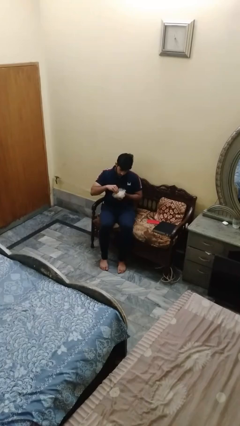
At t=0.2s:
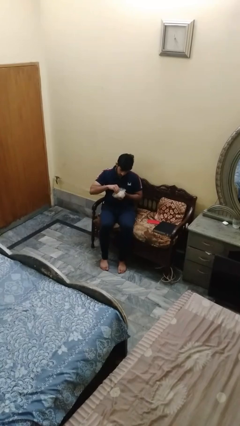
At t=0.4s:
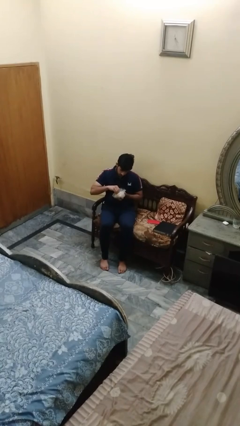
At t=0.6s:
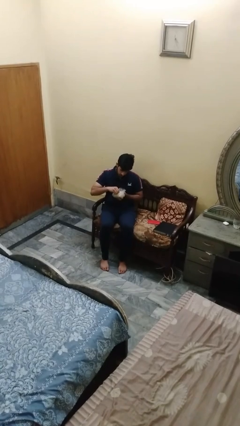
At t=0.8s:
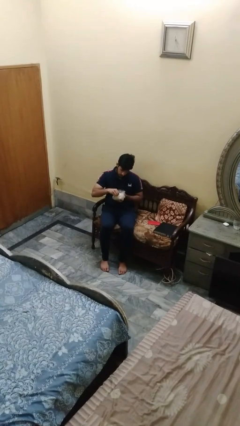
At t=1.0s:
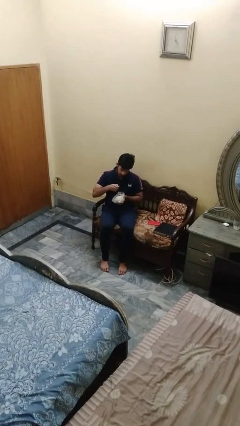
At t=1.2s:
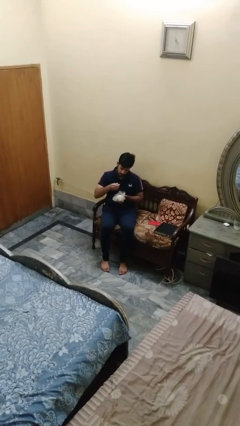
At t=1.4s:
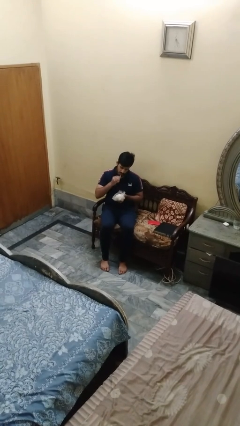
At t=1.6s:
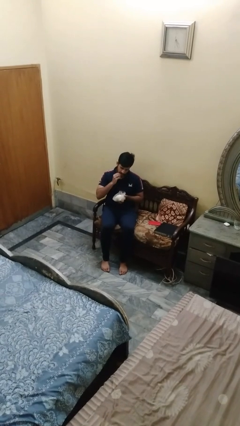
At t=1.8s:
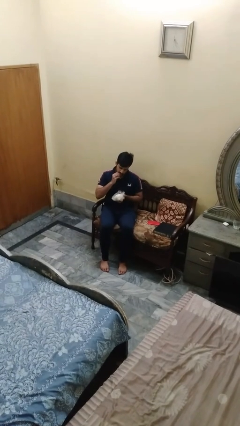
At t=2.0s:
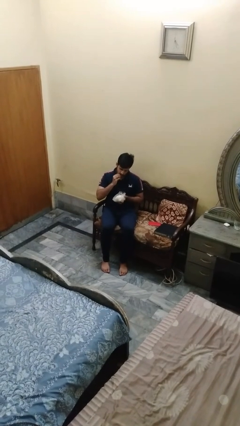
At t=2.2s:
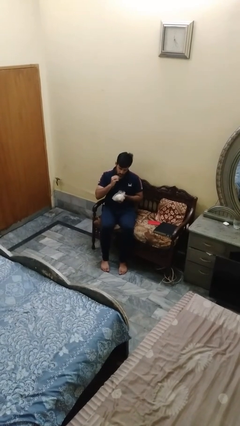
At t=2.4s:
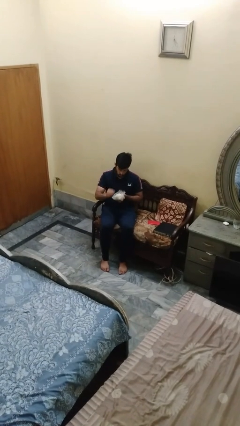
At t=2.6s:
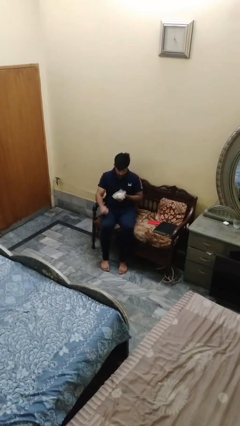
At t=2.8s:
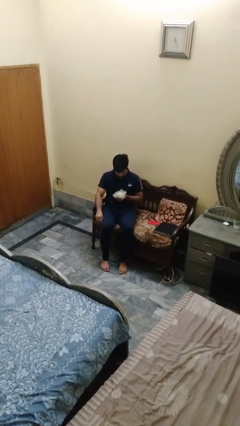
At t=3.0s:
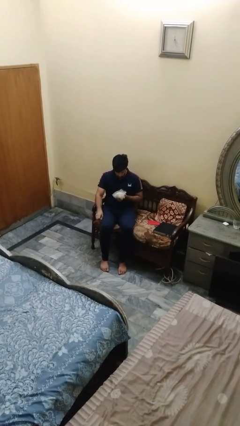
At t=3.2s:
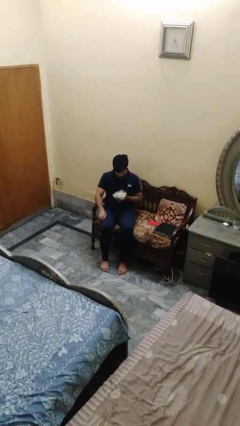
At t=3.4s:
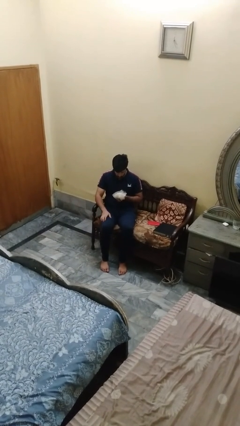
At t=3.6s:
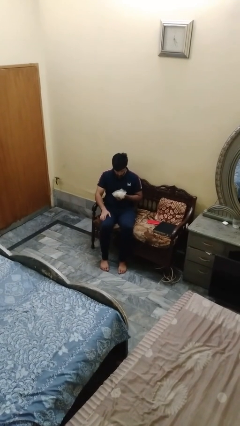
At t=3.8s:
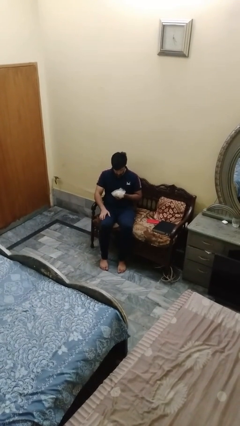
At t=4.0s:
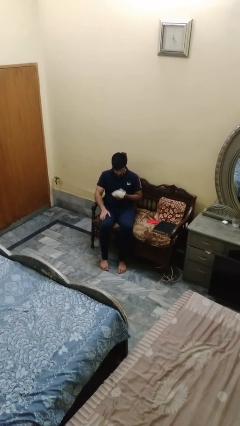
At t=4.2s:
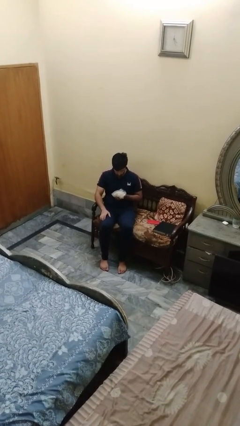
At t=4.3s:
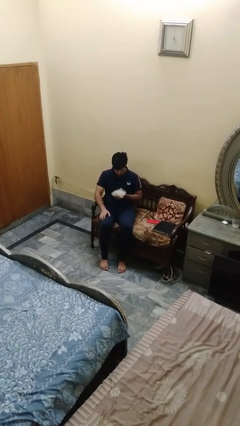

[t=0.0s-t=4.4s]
person eats snack from bag

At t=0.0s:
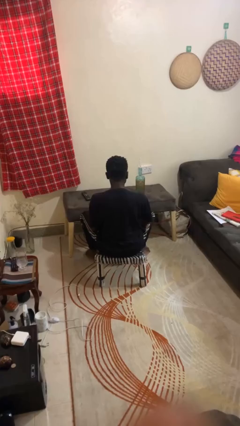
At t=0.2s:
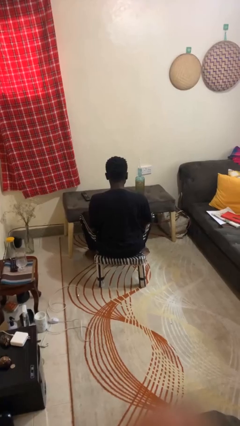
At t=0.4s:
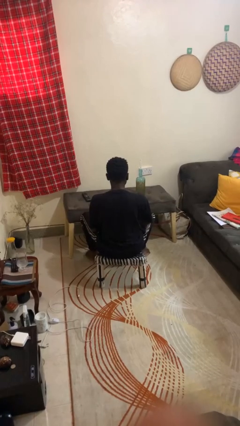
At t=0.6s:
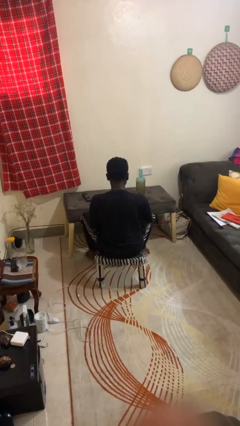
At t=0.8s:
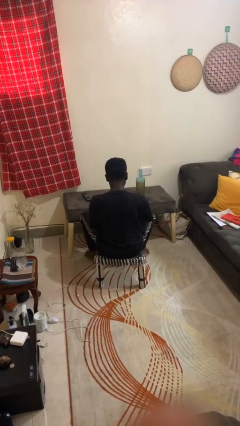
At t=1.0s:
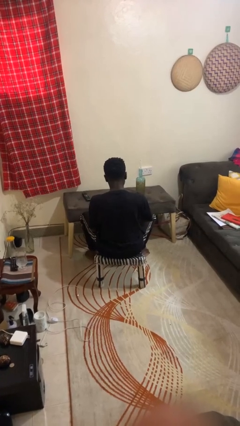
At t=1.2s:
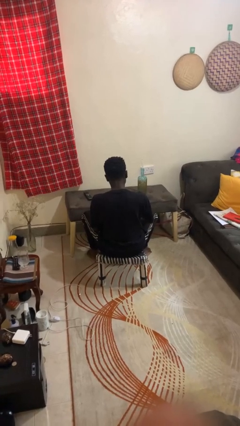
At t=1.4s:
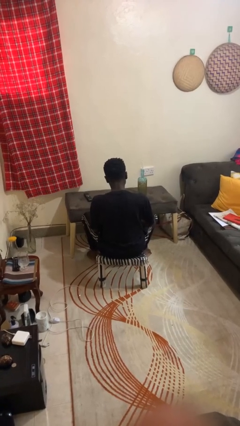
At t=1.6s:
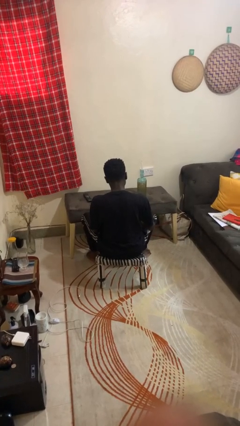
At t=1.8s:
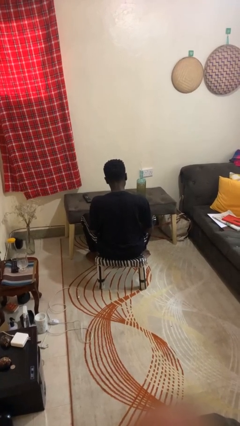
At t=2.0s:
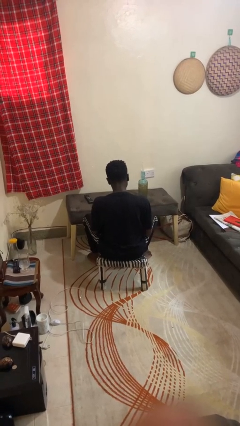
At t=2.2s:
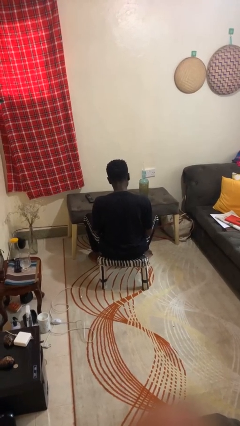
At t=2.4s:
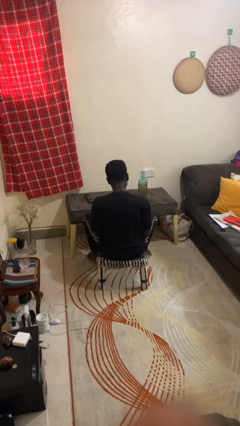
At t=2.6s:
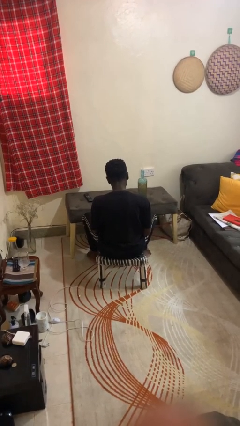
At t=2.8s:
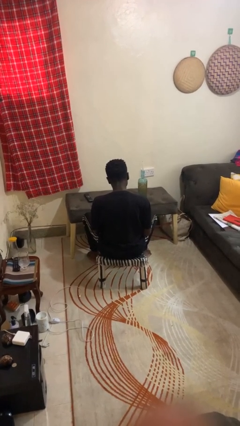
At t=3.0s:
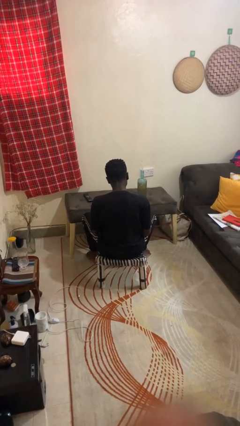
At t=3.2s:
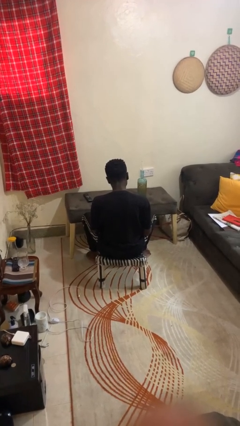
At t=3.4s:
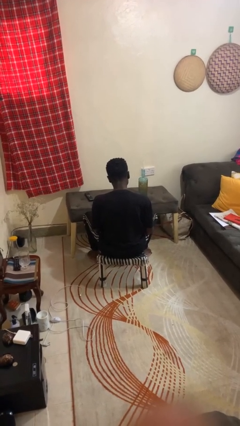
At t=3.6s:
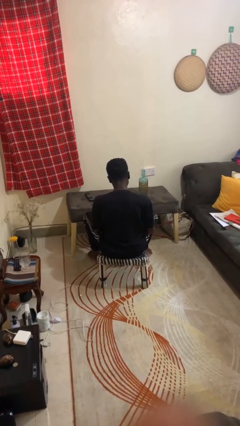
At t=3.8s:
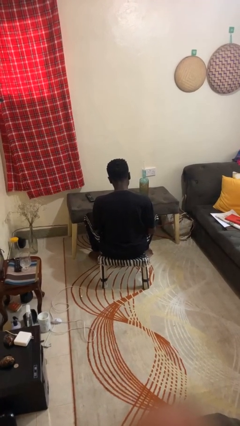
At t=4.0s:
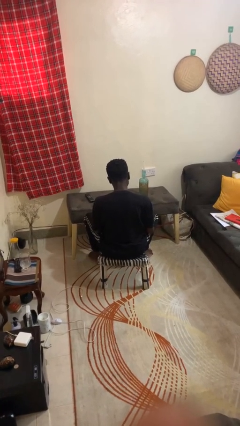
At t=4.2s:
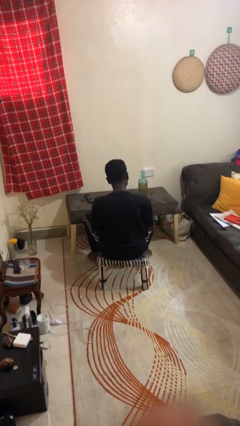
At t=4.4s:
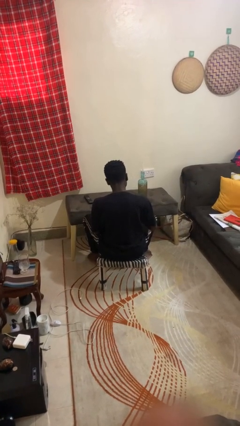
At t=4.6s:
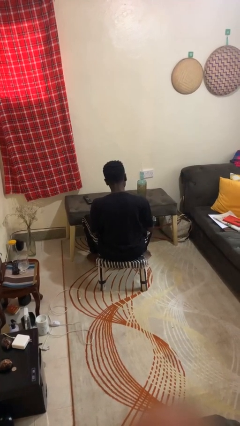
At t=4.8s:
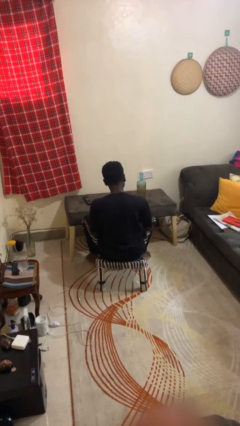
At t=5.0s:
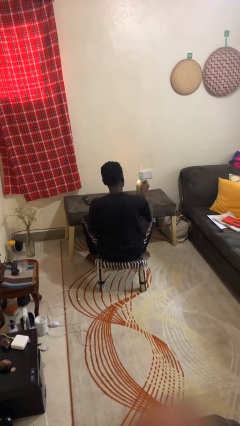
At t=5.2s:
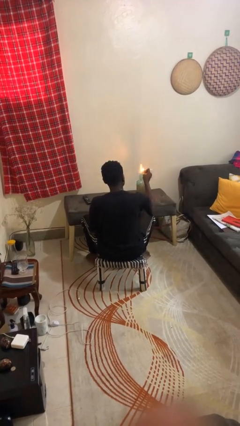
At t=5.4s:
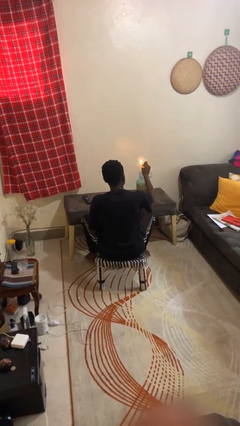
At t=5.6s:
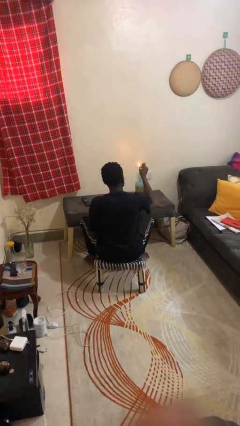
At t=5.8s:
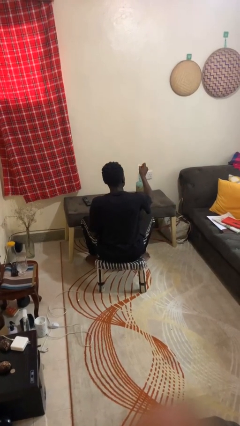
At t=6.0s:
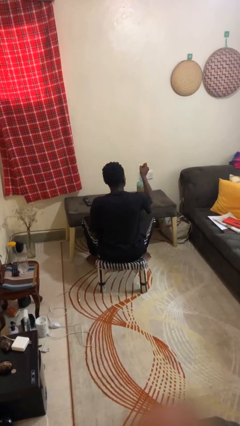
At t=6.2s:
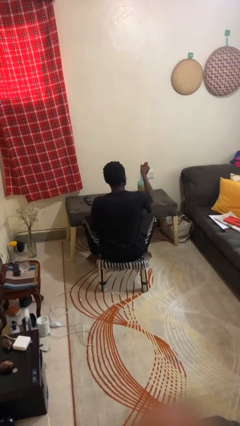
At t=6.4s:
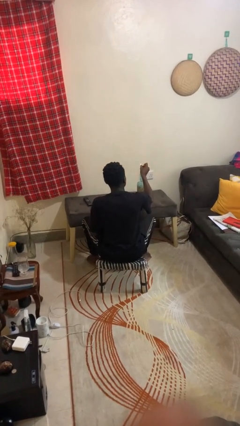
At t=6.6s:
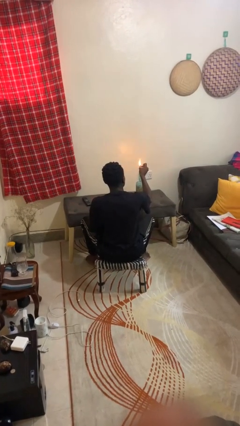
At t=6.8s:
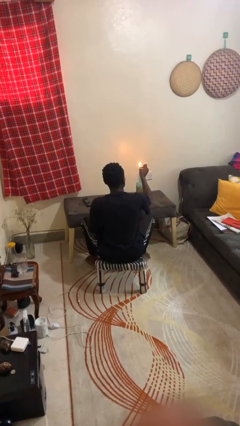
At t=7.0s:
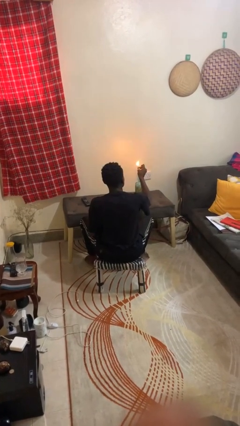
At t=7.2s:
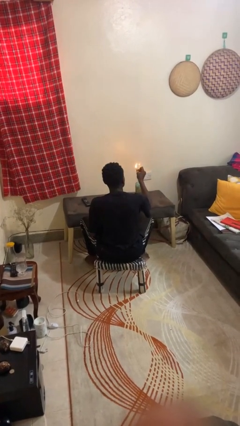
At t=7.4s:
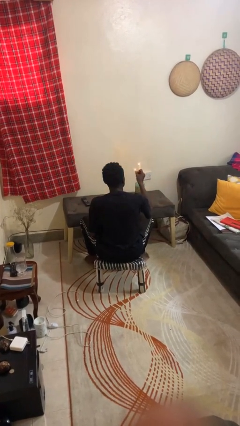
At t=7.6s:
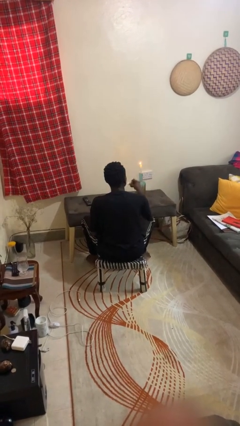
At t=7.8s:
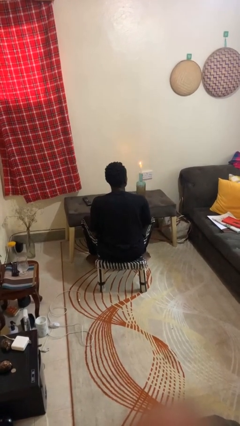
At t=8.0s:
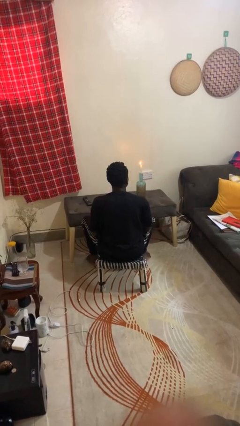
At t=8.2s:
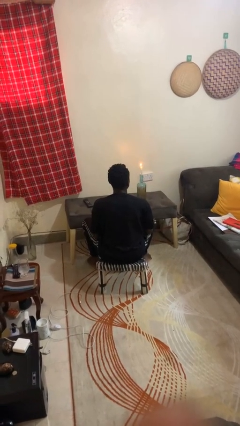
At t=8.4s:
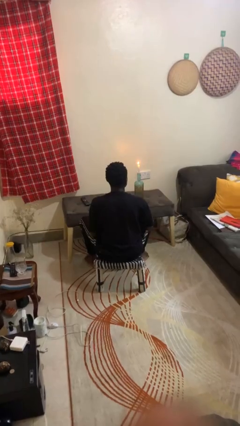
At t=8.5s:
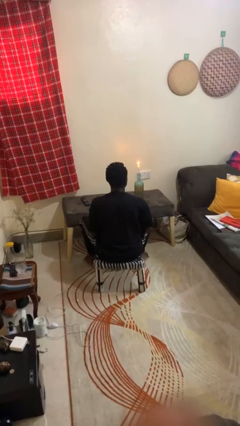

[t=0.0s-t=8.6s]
person lights candle

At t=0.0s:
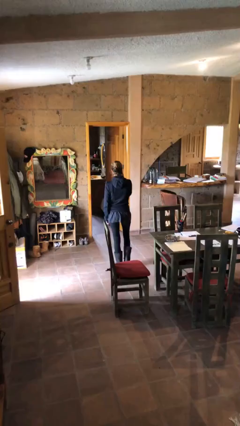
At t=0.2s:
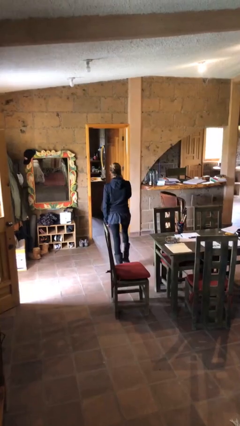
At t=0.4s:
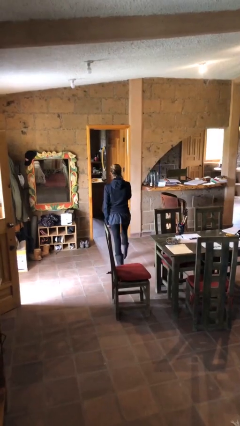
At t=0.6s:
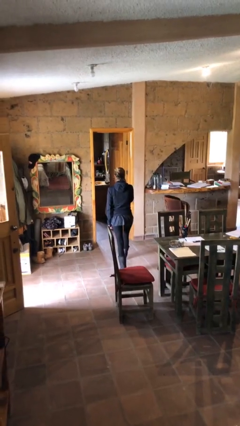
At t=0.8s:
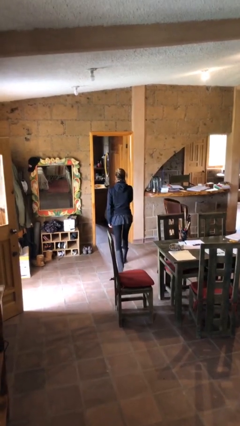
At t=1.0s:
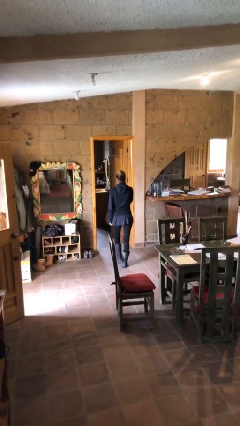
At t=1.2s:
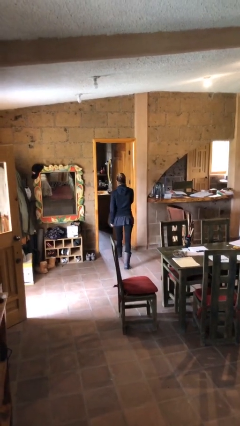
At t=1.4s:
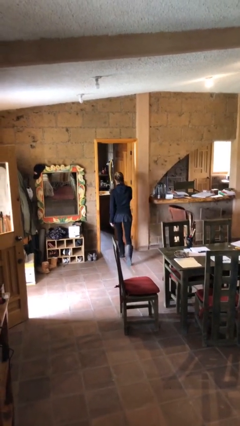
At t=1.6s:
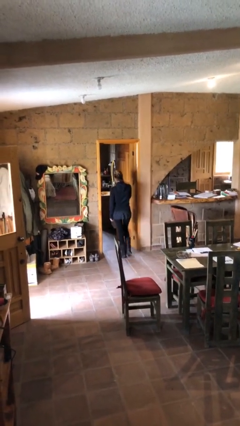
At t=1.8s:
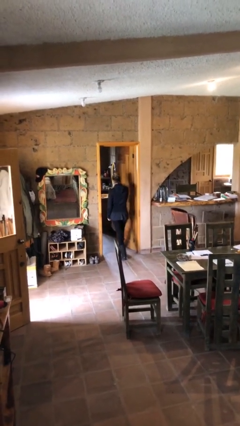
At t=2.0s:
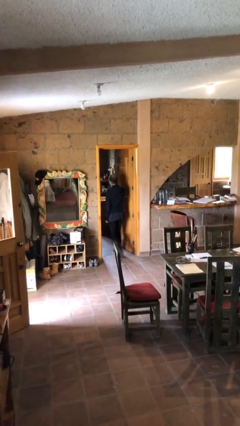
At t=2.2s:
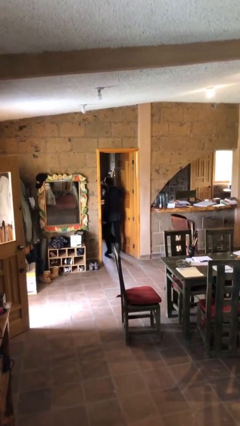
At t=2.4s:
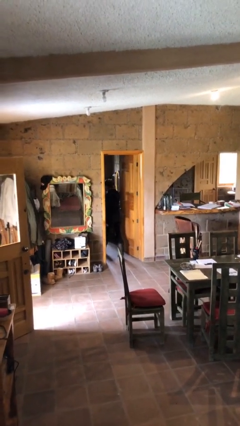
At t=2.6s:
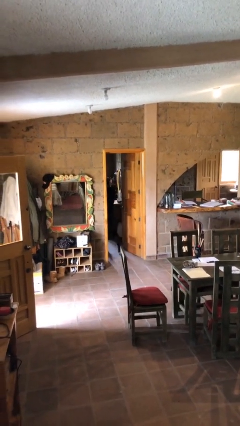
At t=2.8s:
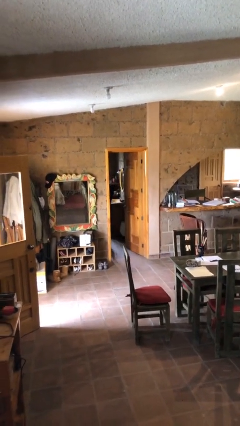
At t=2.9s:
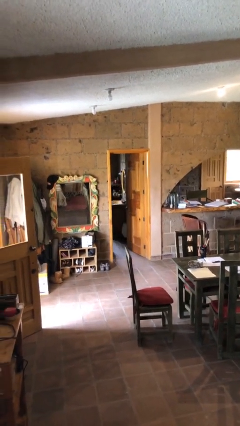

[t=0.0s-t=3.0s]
person exits scene through structure

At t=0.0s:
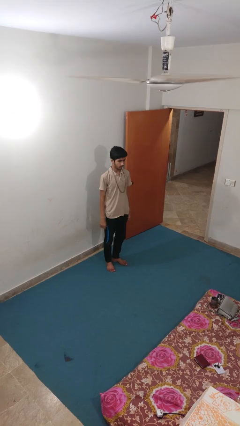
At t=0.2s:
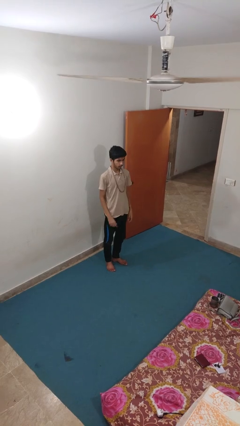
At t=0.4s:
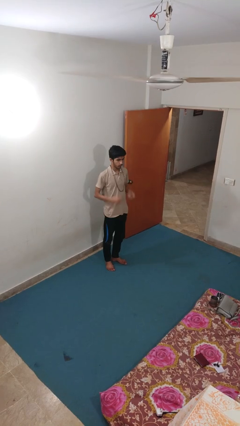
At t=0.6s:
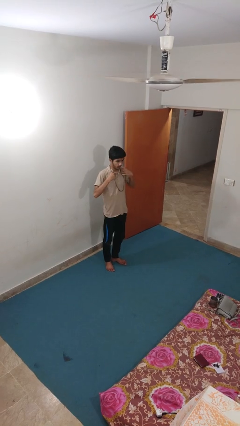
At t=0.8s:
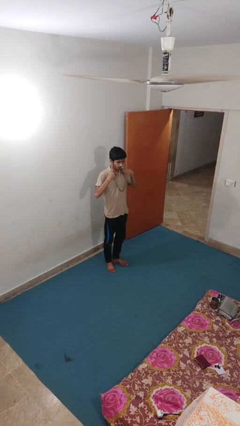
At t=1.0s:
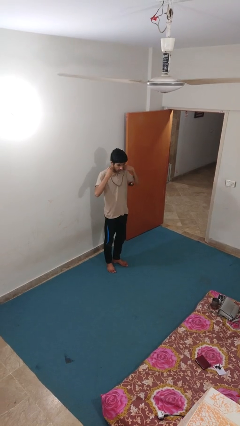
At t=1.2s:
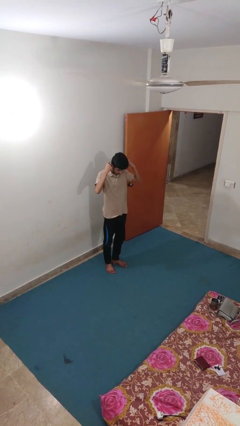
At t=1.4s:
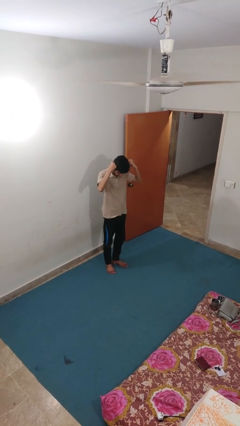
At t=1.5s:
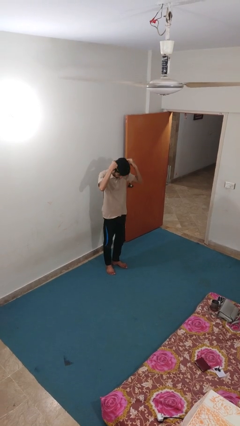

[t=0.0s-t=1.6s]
person takes off necklace
